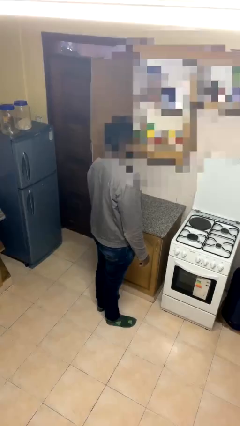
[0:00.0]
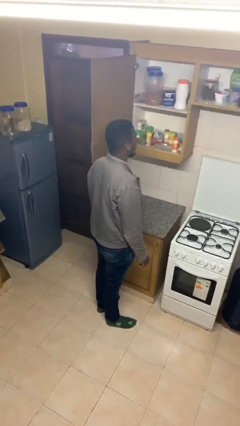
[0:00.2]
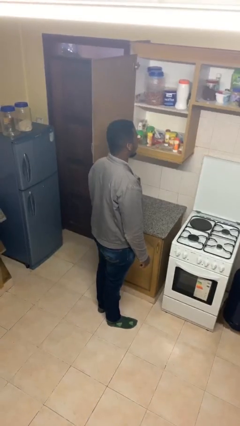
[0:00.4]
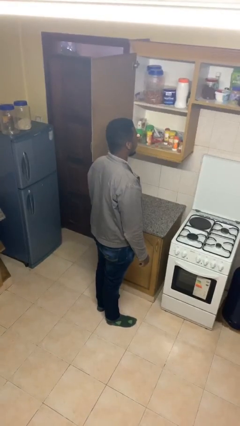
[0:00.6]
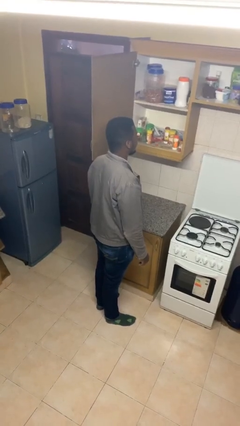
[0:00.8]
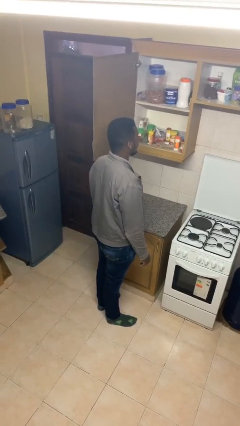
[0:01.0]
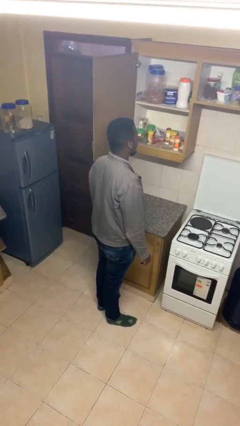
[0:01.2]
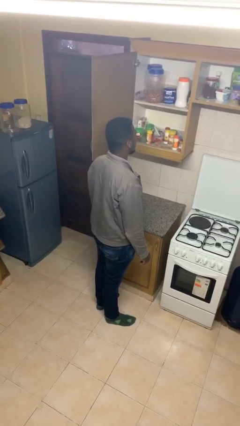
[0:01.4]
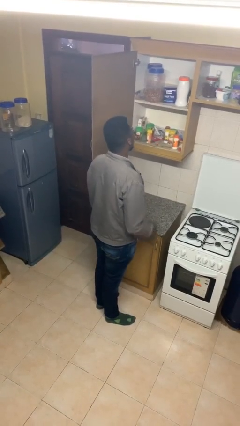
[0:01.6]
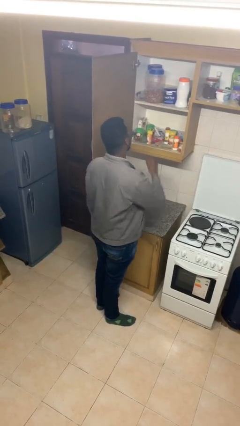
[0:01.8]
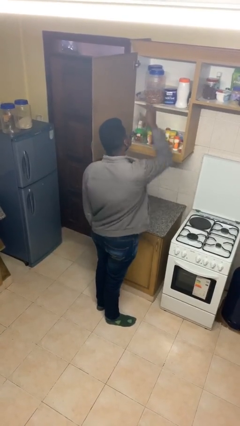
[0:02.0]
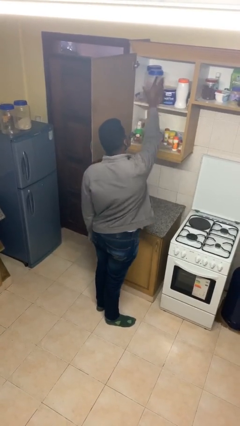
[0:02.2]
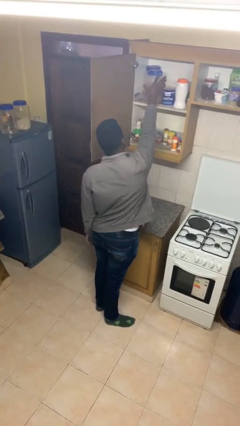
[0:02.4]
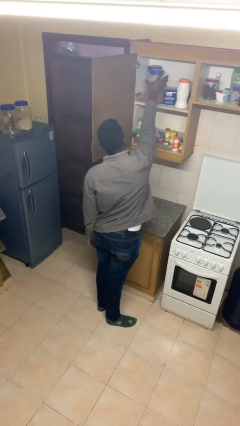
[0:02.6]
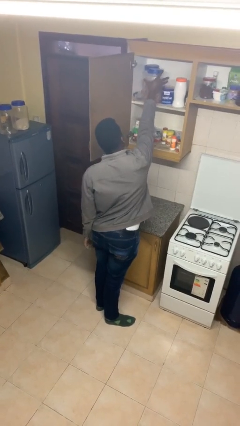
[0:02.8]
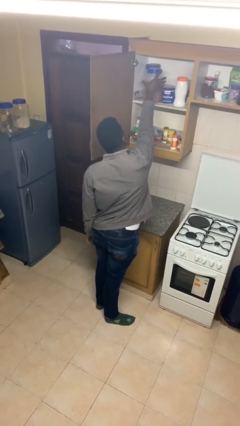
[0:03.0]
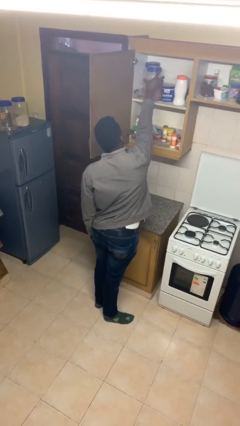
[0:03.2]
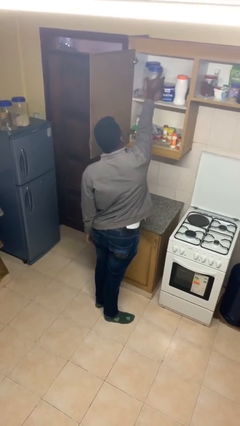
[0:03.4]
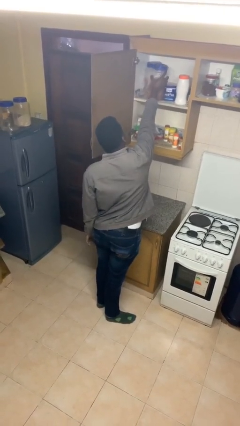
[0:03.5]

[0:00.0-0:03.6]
person picks up object from shelf

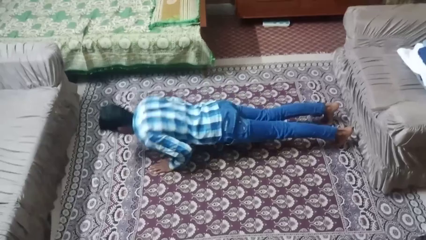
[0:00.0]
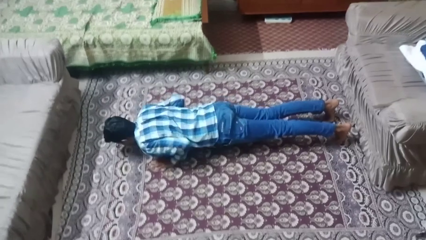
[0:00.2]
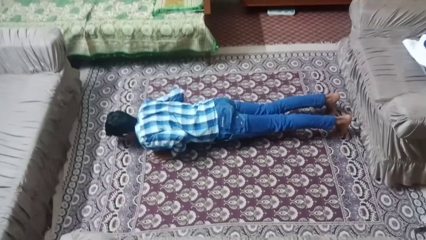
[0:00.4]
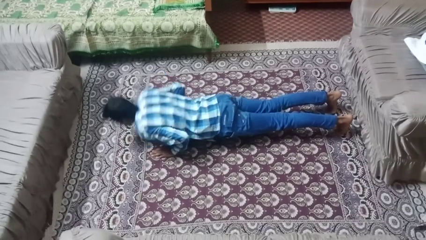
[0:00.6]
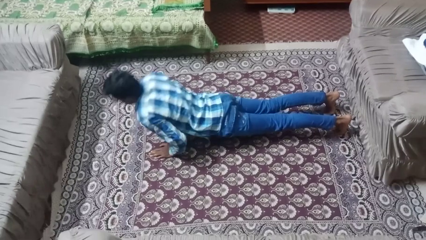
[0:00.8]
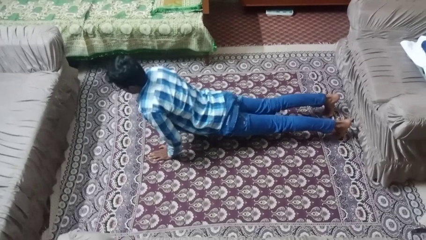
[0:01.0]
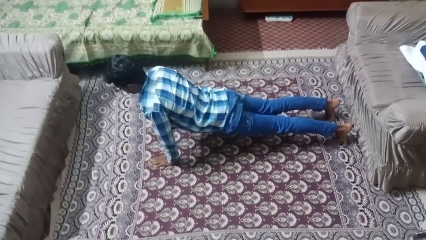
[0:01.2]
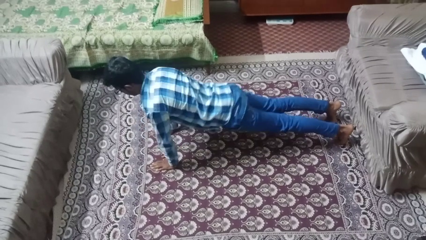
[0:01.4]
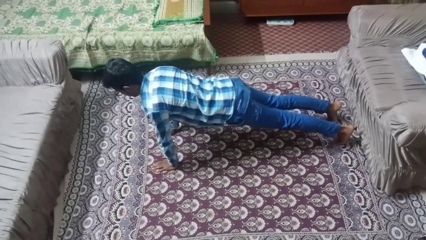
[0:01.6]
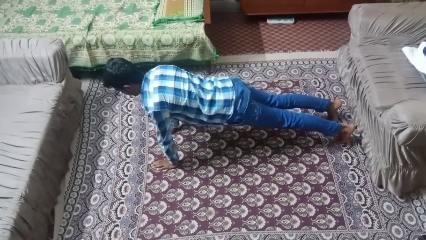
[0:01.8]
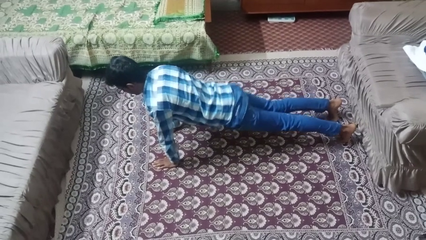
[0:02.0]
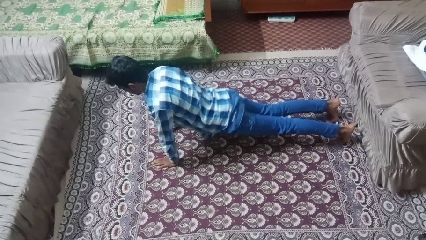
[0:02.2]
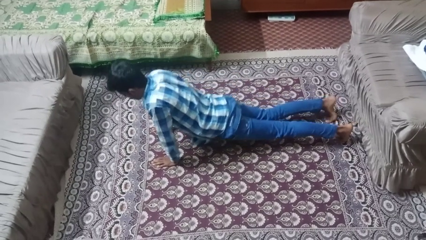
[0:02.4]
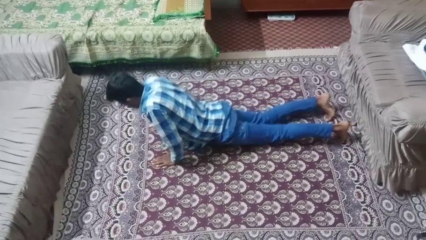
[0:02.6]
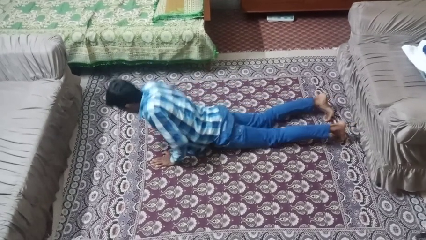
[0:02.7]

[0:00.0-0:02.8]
person exercises with pushup

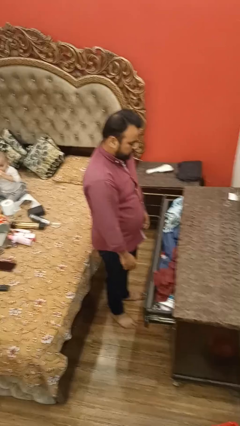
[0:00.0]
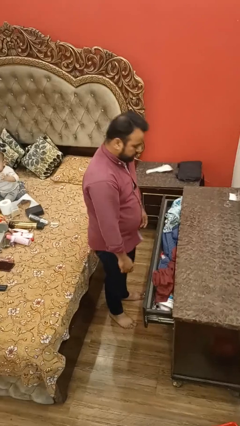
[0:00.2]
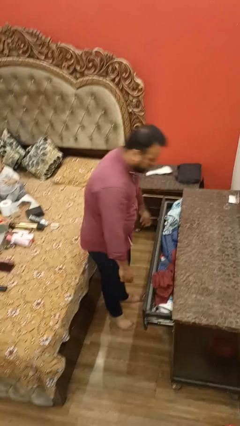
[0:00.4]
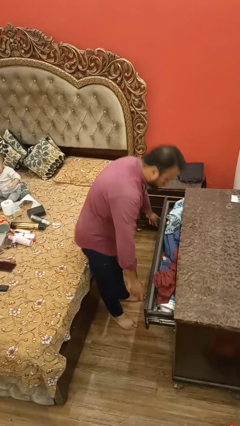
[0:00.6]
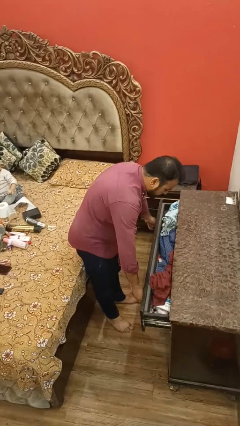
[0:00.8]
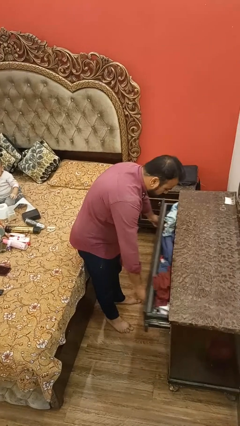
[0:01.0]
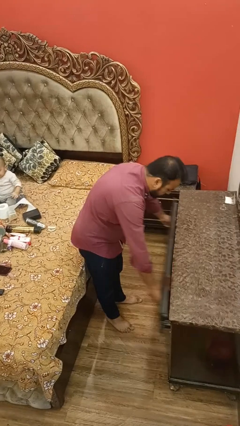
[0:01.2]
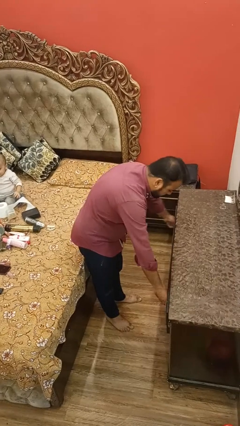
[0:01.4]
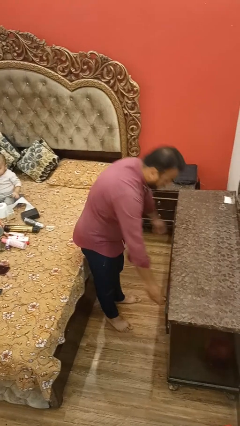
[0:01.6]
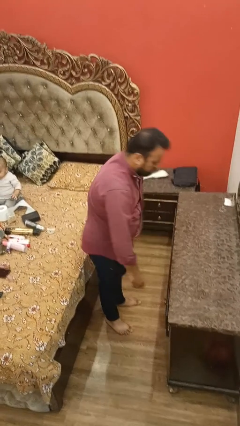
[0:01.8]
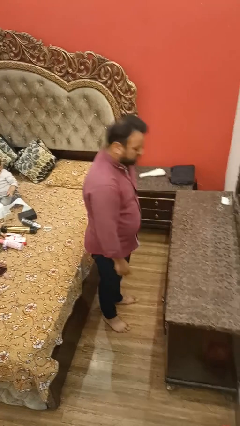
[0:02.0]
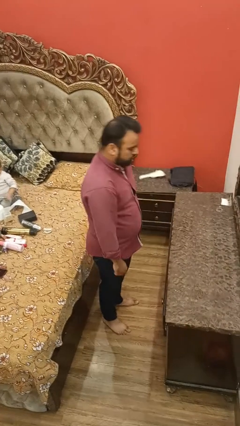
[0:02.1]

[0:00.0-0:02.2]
person closes dresser drawer

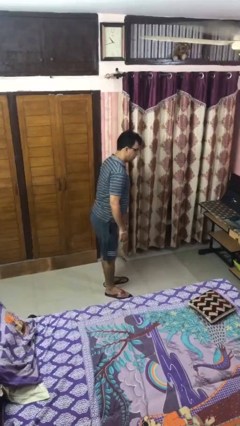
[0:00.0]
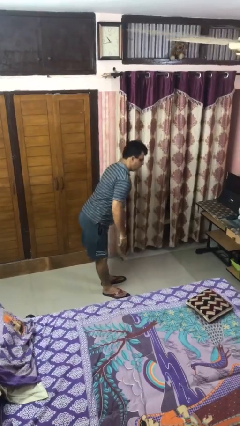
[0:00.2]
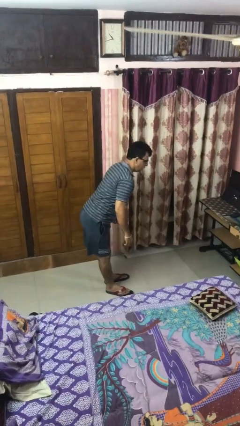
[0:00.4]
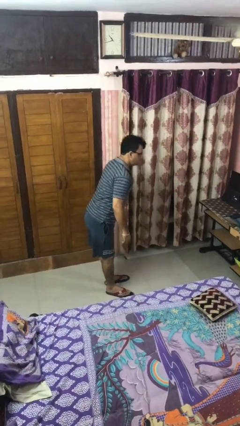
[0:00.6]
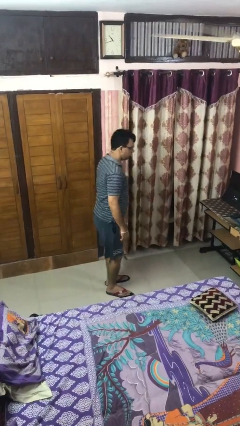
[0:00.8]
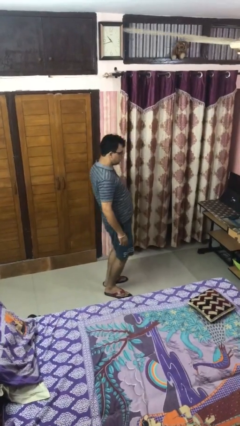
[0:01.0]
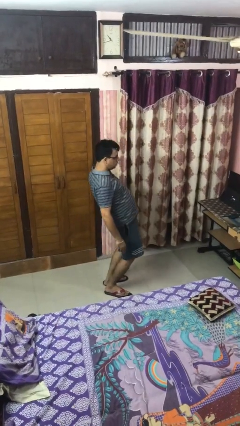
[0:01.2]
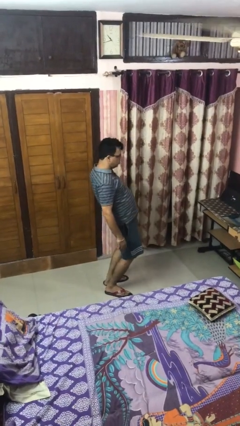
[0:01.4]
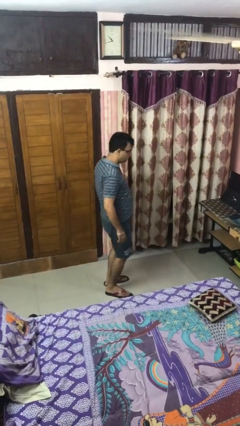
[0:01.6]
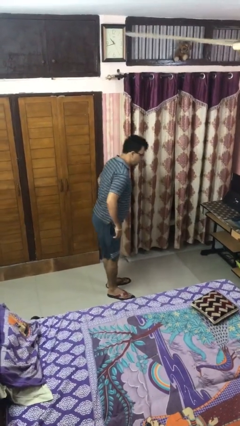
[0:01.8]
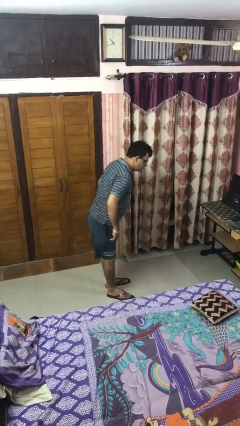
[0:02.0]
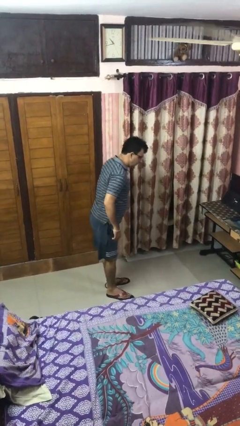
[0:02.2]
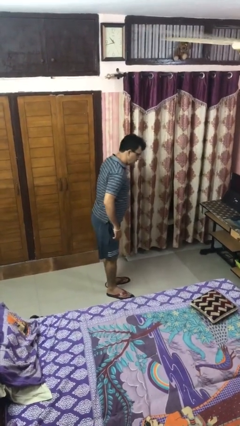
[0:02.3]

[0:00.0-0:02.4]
person wiggles hips

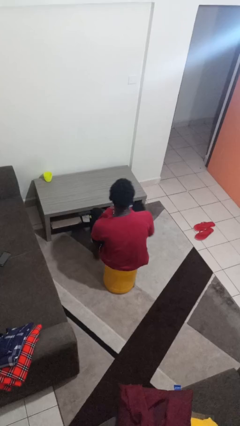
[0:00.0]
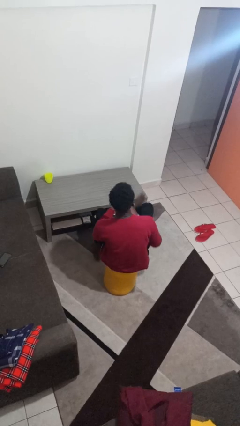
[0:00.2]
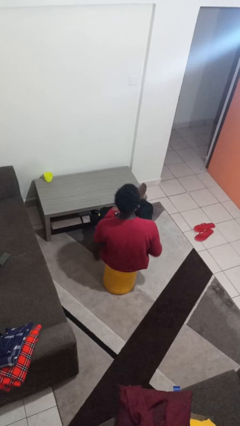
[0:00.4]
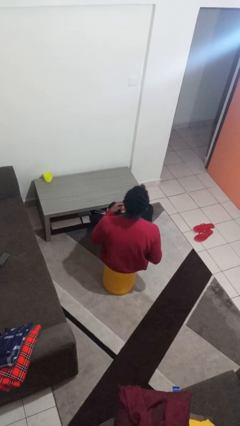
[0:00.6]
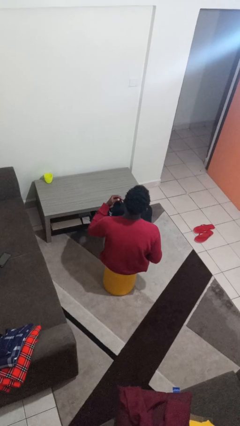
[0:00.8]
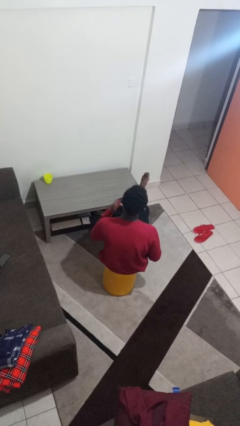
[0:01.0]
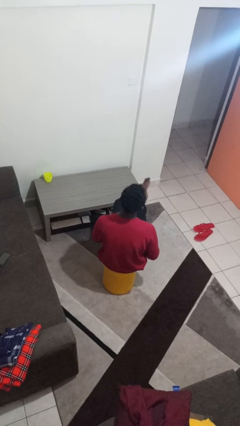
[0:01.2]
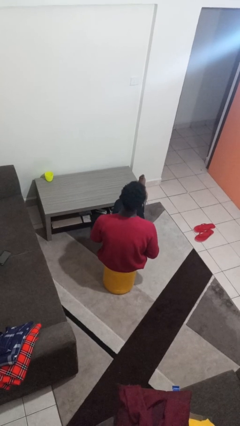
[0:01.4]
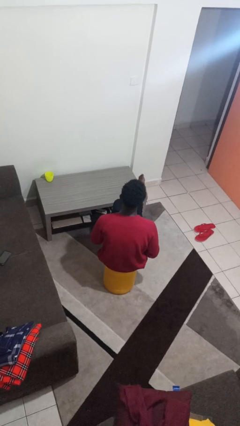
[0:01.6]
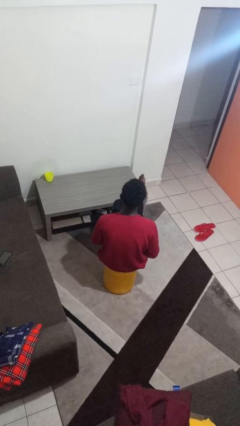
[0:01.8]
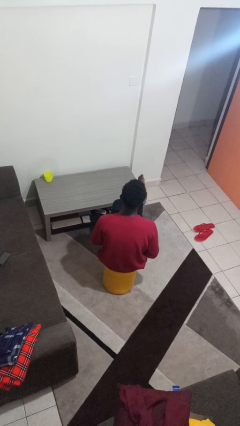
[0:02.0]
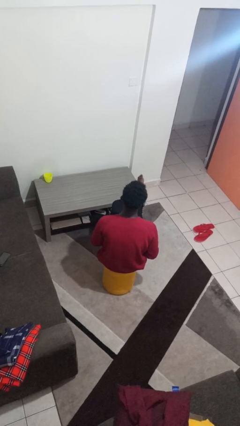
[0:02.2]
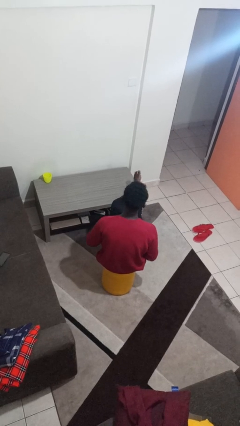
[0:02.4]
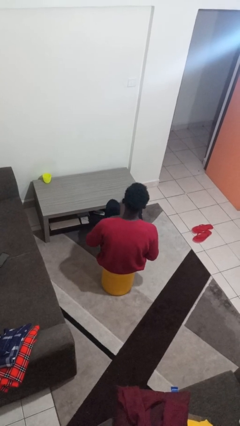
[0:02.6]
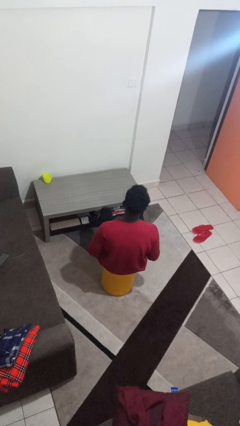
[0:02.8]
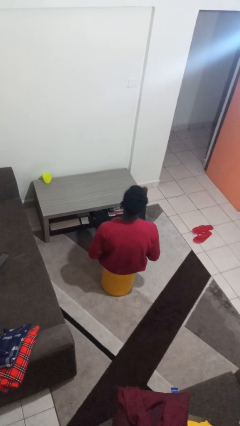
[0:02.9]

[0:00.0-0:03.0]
person puts feet up

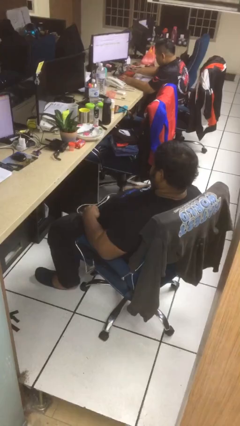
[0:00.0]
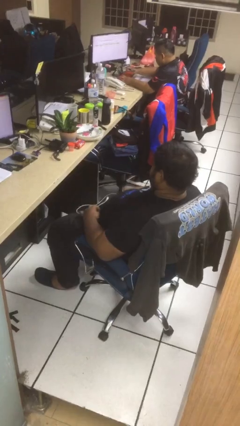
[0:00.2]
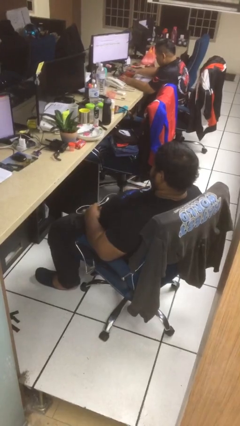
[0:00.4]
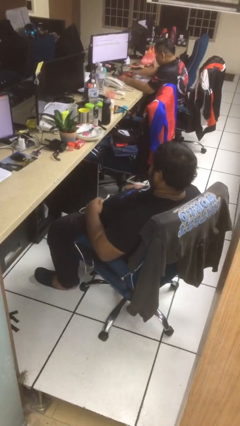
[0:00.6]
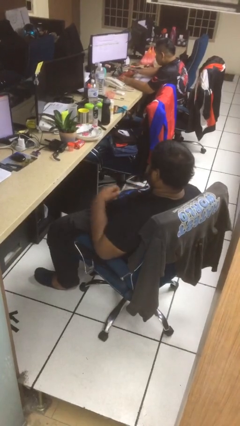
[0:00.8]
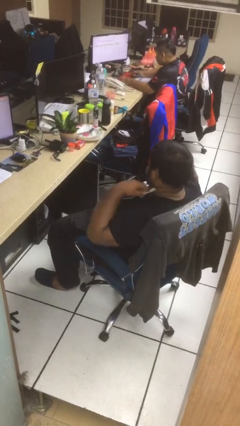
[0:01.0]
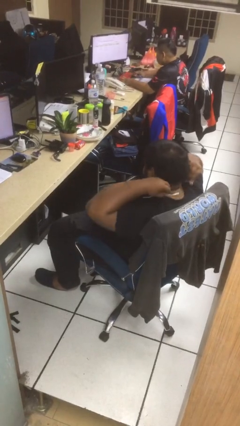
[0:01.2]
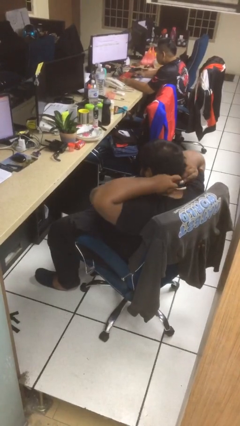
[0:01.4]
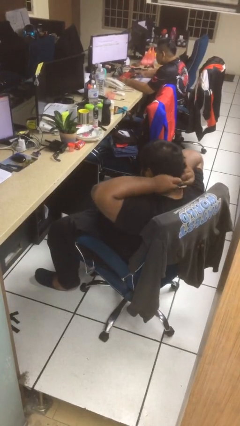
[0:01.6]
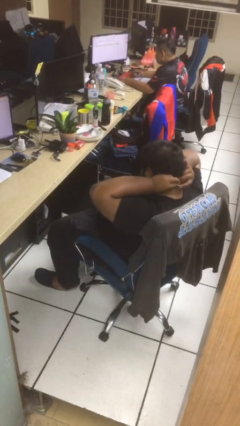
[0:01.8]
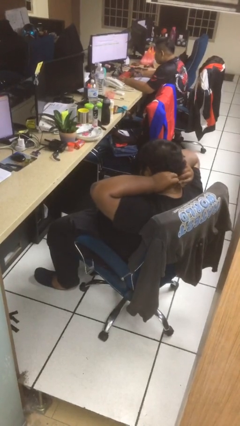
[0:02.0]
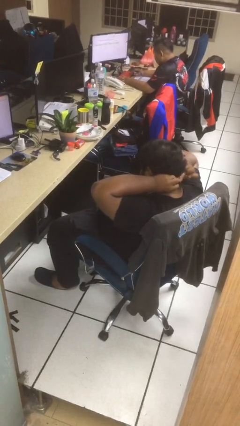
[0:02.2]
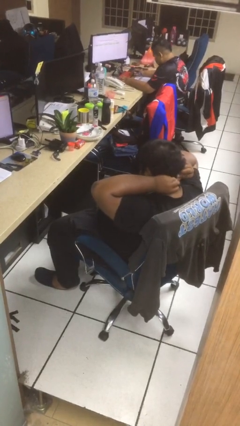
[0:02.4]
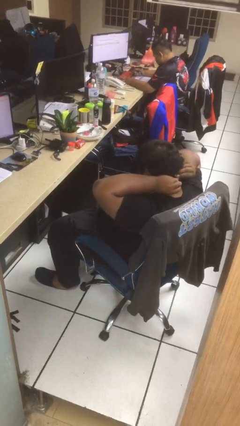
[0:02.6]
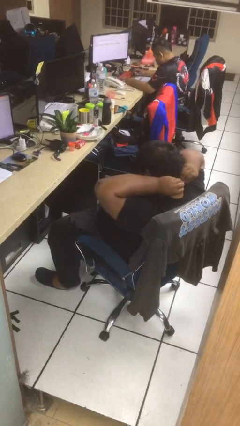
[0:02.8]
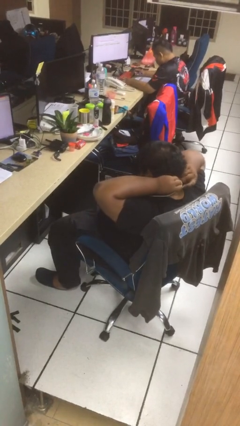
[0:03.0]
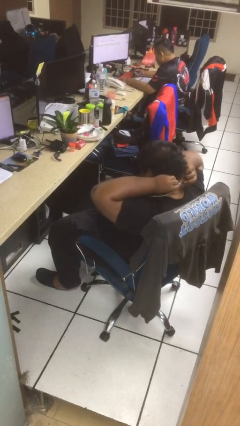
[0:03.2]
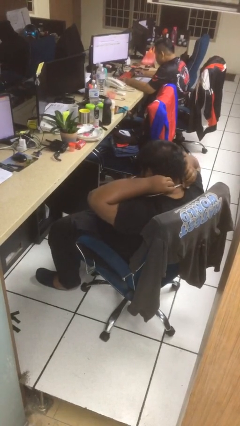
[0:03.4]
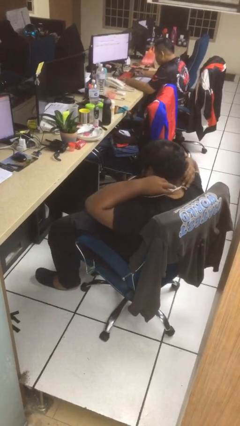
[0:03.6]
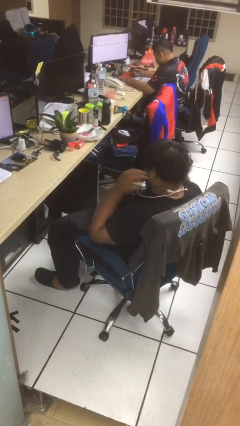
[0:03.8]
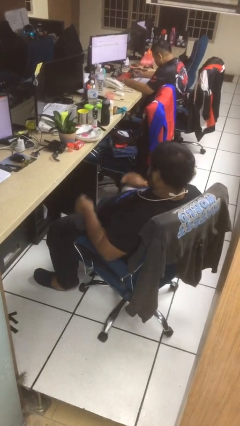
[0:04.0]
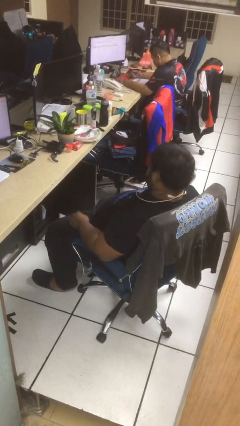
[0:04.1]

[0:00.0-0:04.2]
person puts on necklace
